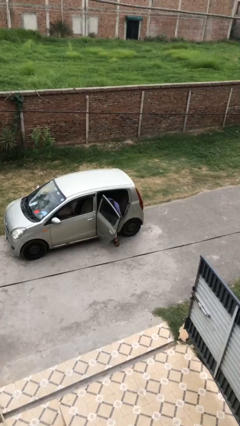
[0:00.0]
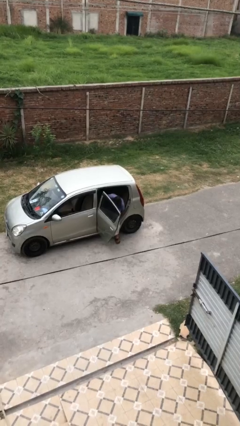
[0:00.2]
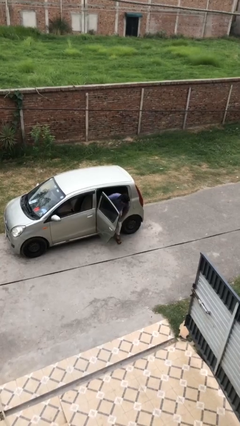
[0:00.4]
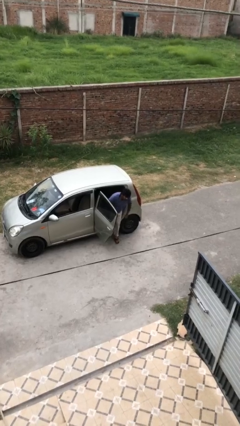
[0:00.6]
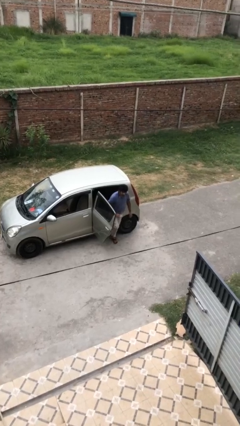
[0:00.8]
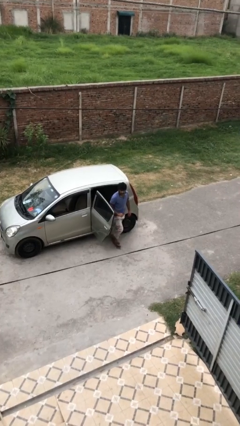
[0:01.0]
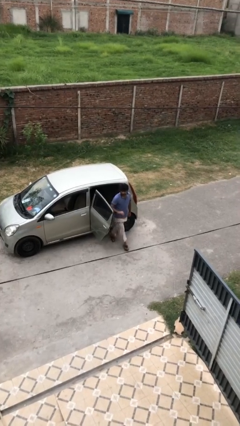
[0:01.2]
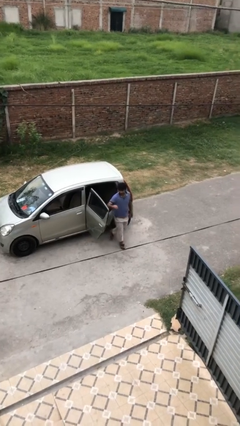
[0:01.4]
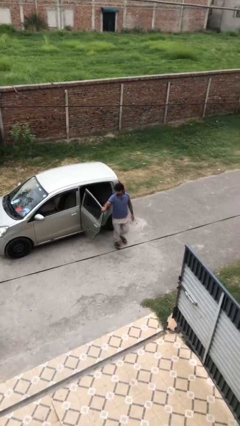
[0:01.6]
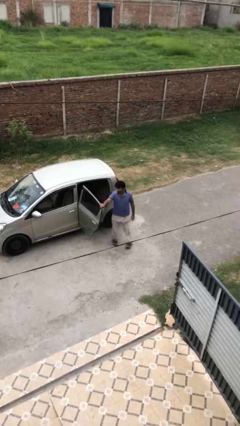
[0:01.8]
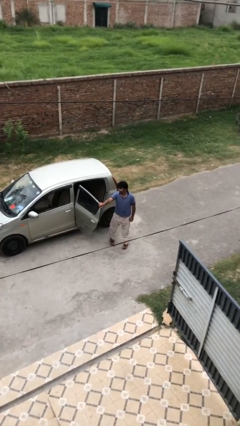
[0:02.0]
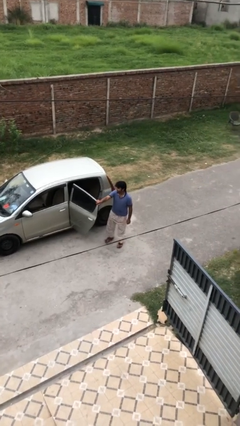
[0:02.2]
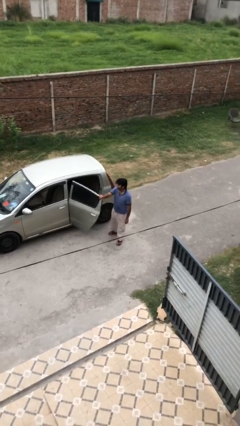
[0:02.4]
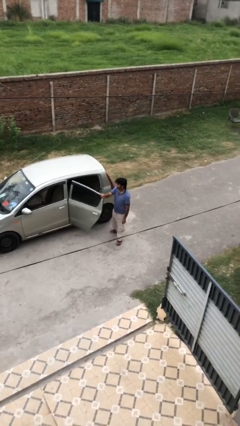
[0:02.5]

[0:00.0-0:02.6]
person exits car

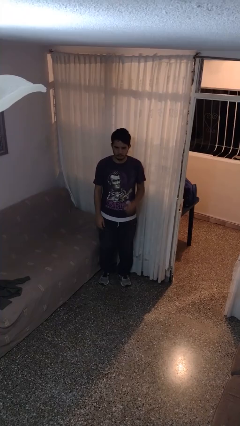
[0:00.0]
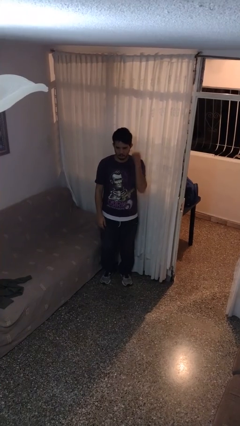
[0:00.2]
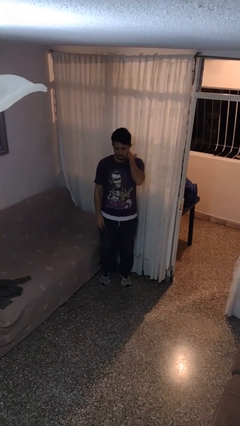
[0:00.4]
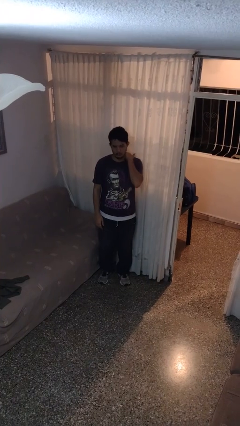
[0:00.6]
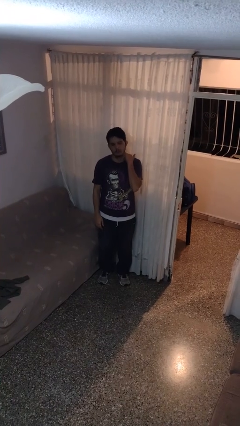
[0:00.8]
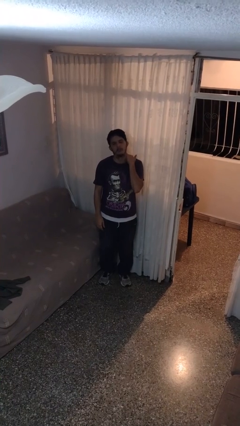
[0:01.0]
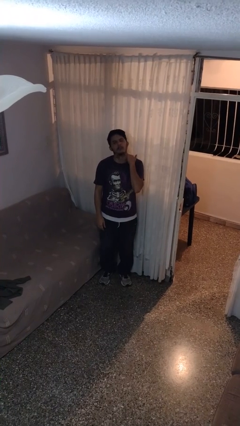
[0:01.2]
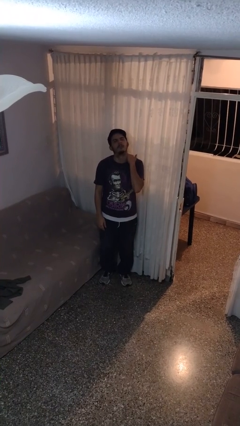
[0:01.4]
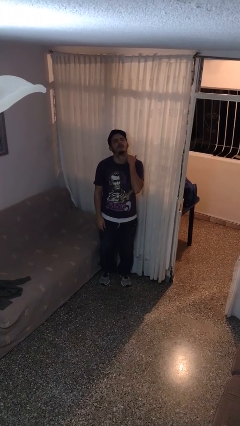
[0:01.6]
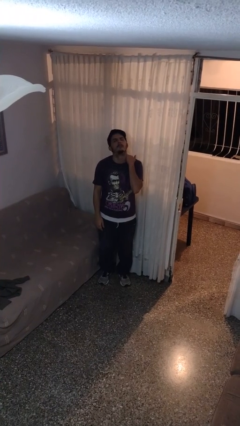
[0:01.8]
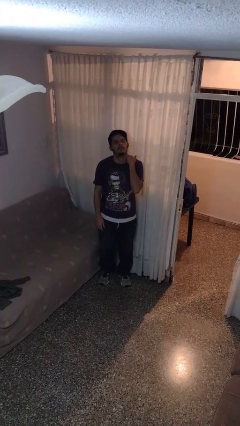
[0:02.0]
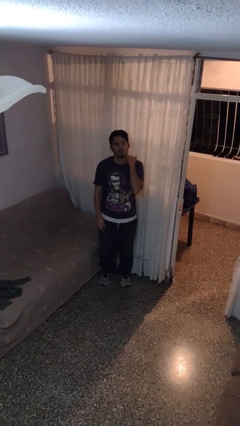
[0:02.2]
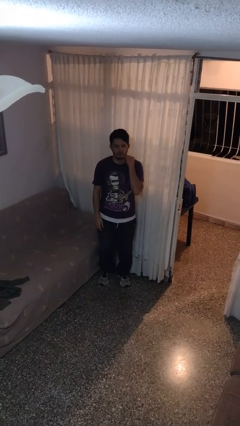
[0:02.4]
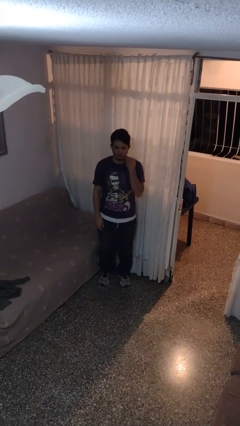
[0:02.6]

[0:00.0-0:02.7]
person rubs neck

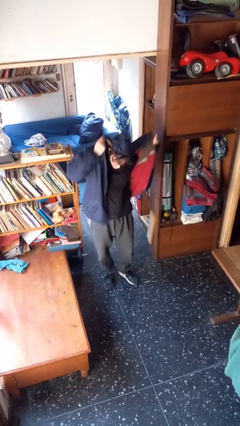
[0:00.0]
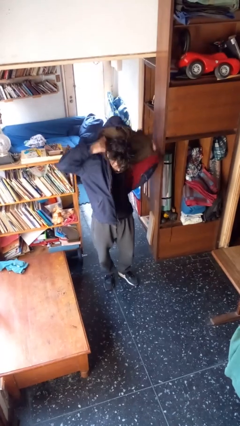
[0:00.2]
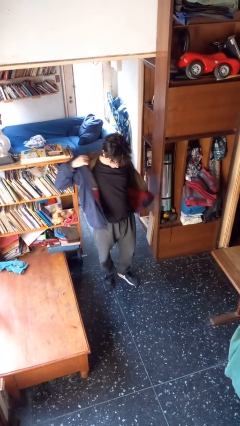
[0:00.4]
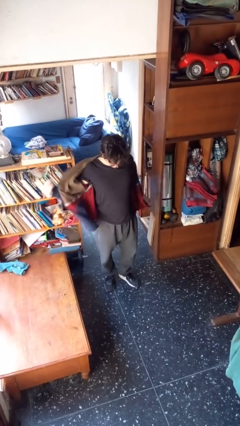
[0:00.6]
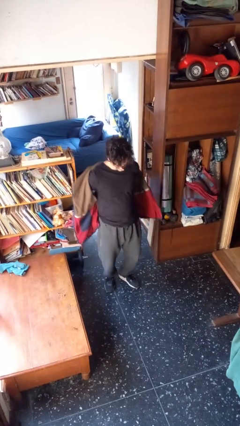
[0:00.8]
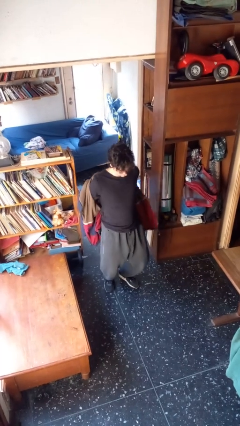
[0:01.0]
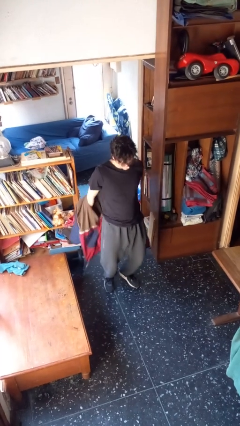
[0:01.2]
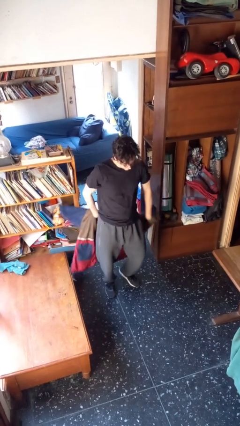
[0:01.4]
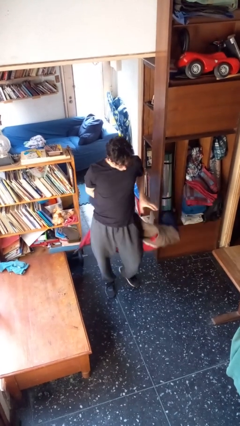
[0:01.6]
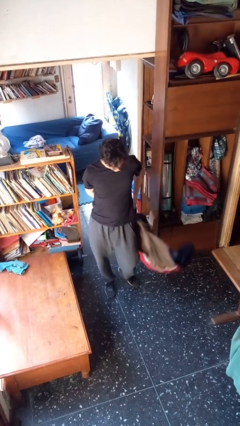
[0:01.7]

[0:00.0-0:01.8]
person takes off hoodie

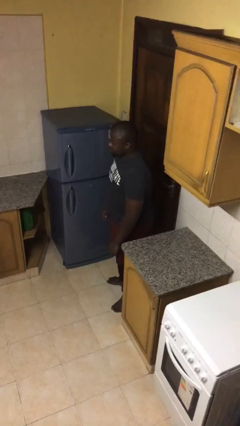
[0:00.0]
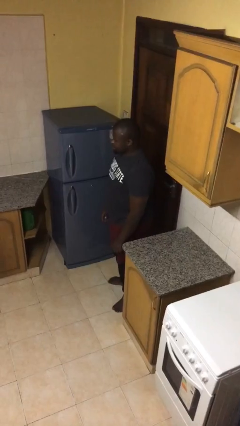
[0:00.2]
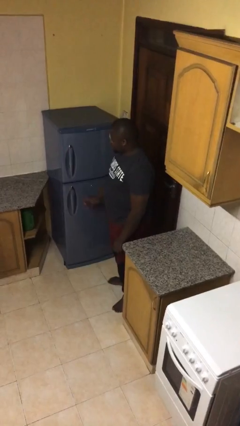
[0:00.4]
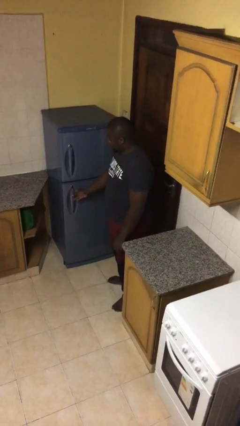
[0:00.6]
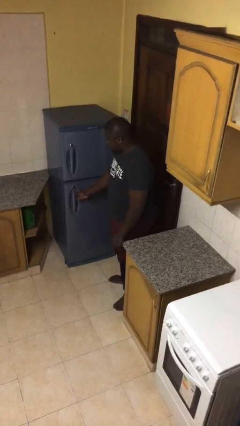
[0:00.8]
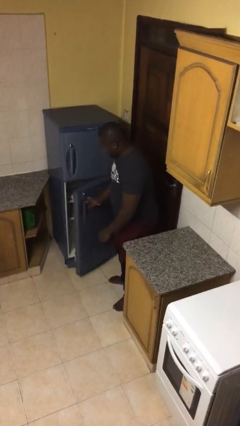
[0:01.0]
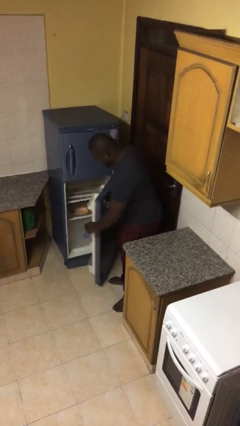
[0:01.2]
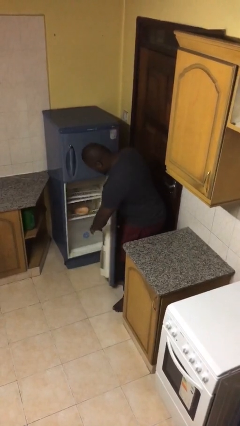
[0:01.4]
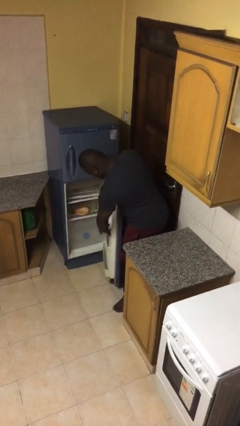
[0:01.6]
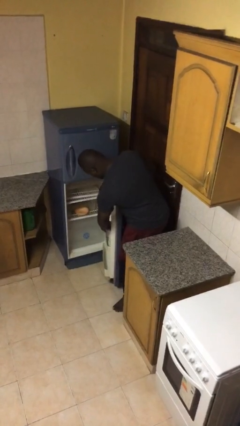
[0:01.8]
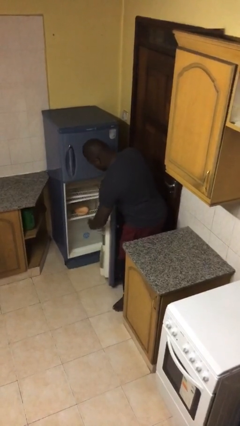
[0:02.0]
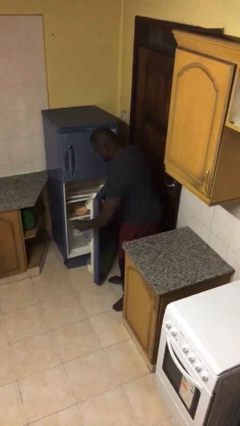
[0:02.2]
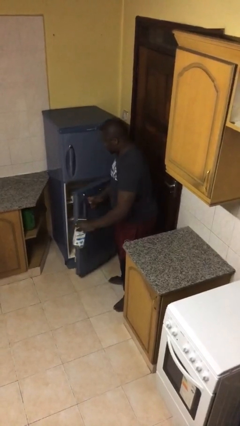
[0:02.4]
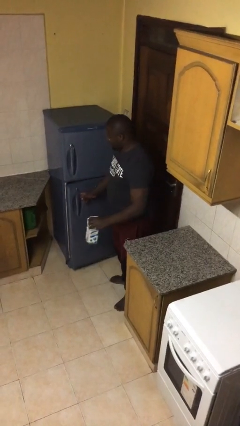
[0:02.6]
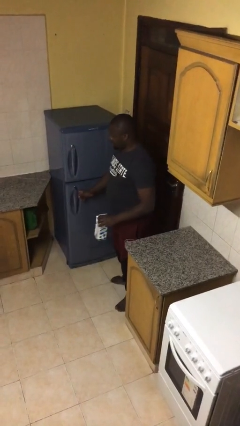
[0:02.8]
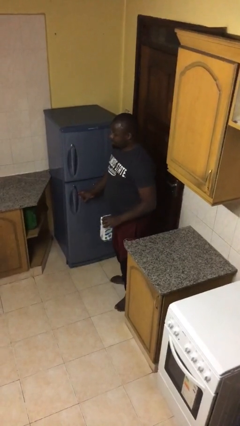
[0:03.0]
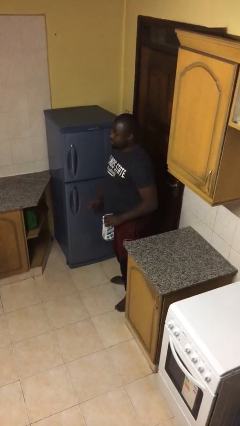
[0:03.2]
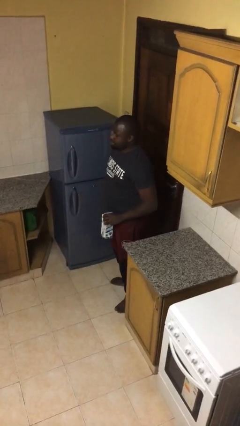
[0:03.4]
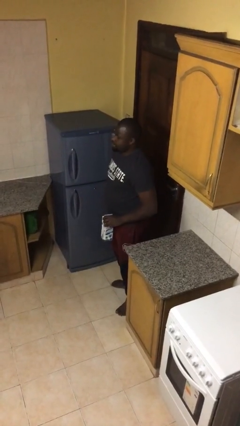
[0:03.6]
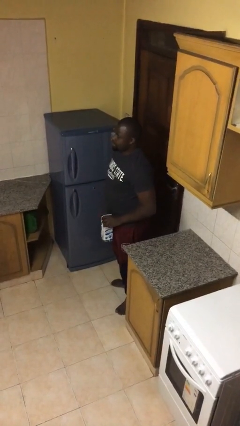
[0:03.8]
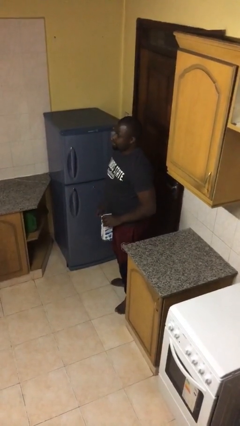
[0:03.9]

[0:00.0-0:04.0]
person takes object from refrigerator

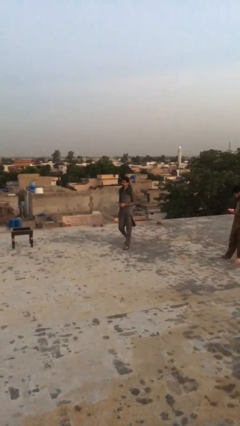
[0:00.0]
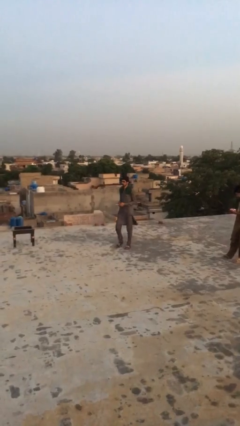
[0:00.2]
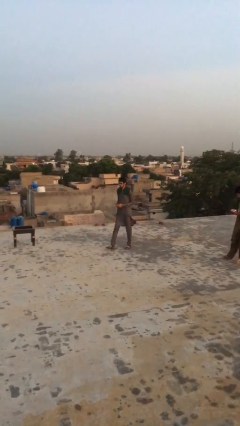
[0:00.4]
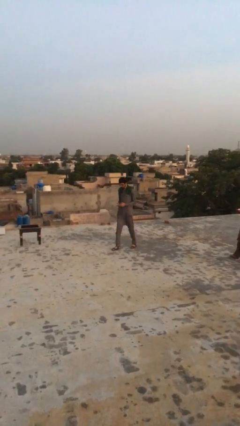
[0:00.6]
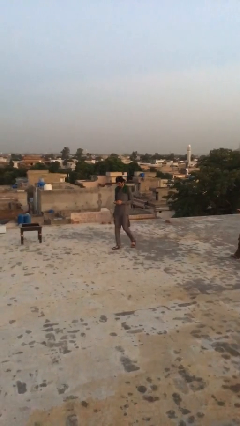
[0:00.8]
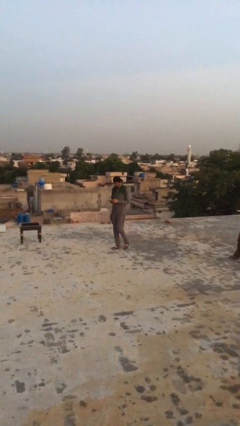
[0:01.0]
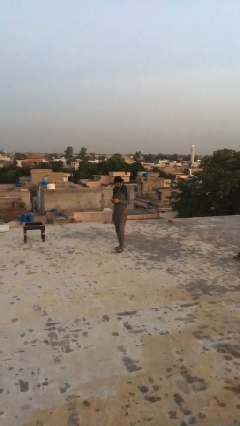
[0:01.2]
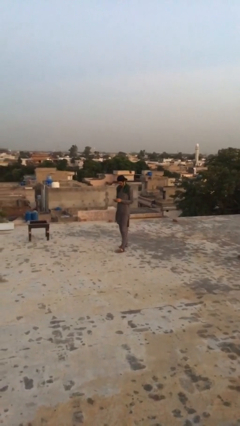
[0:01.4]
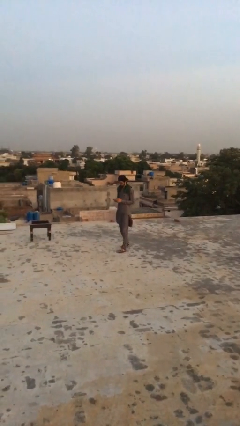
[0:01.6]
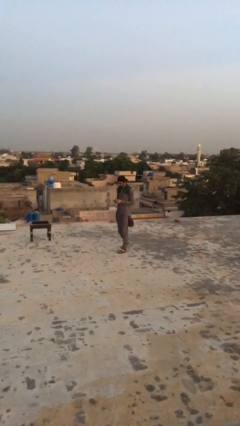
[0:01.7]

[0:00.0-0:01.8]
person texts on phone

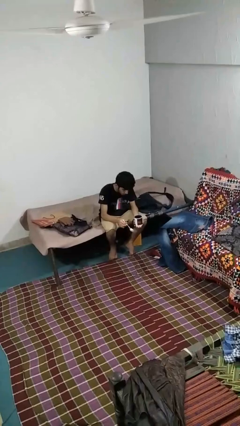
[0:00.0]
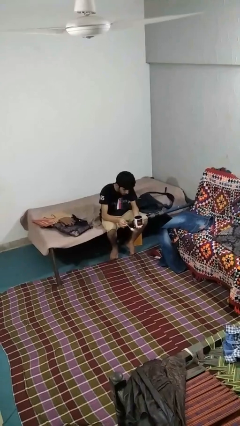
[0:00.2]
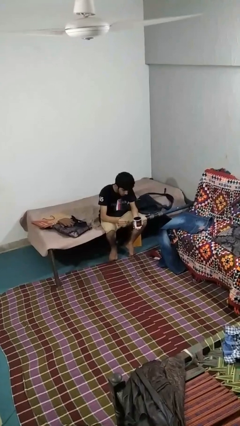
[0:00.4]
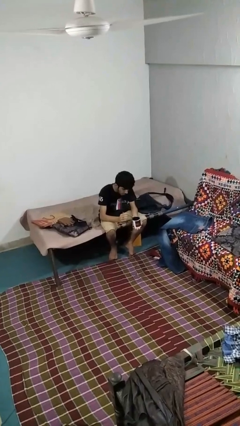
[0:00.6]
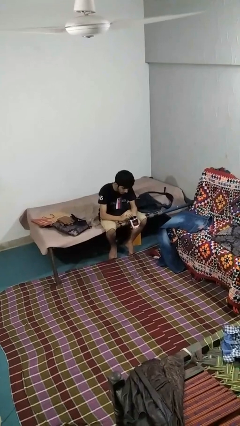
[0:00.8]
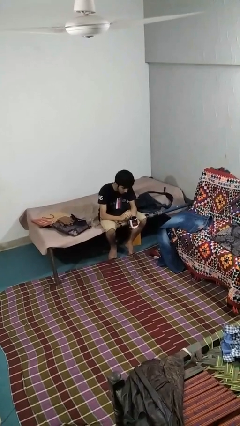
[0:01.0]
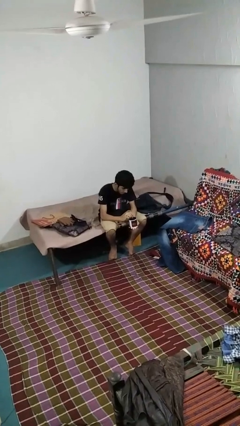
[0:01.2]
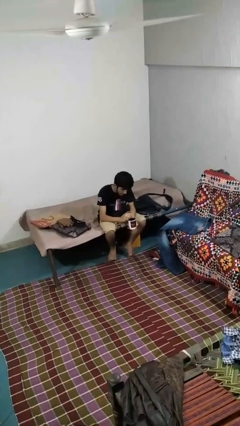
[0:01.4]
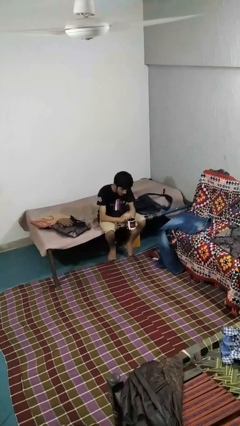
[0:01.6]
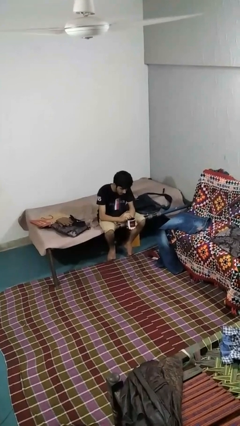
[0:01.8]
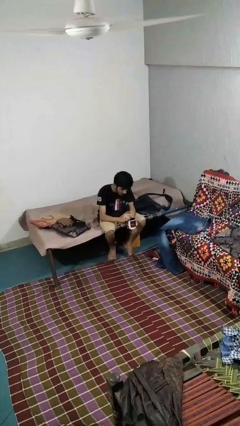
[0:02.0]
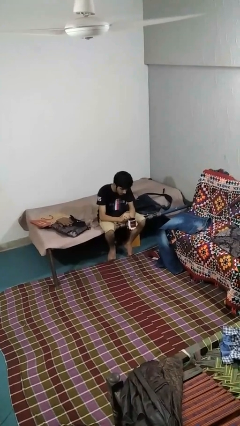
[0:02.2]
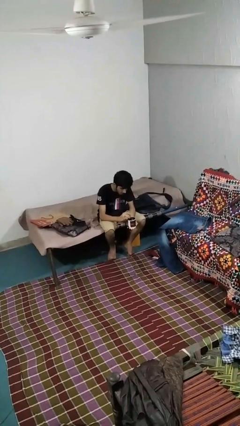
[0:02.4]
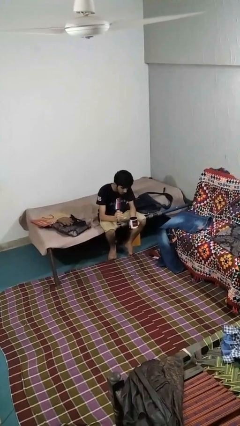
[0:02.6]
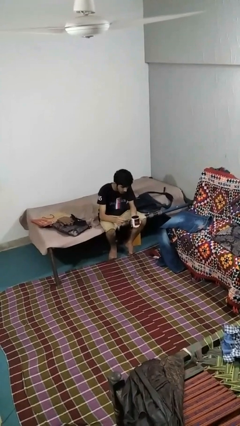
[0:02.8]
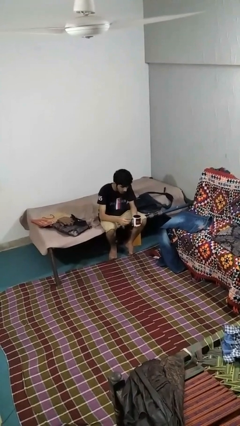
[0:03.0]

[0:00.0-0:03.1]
person stirs mug

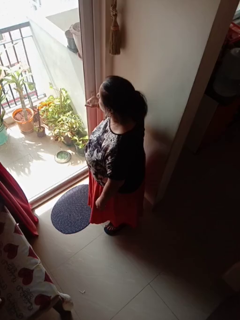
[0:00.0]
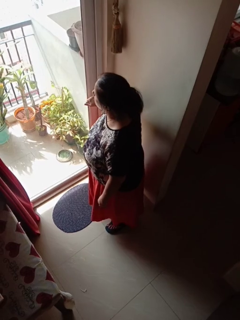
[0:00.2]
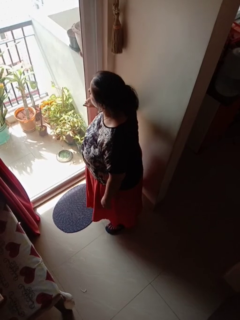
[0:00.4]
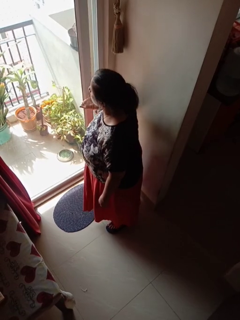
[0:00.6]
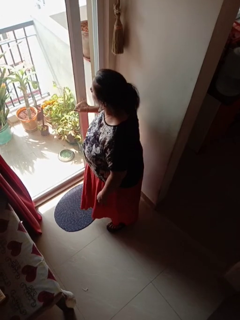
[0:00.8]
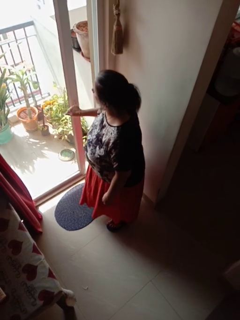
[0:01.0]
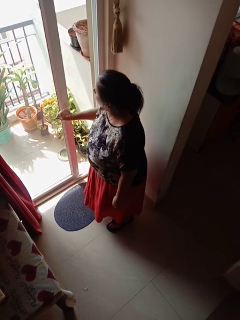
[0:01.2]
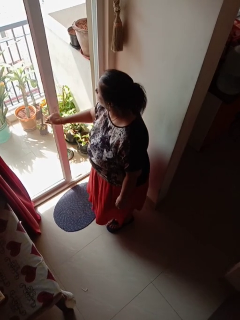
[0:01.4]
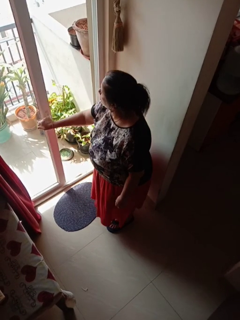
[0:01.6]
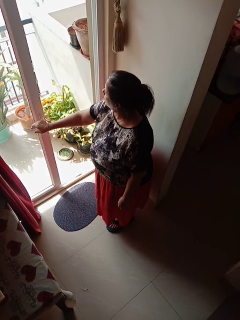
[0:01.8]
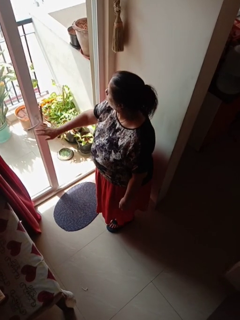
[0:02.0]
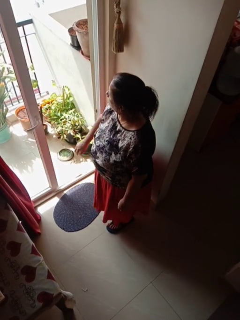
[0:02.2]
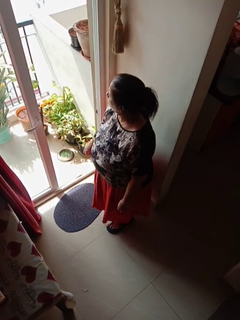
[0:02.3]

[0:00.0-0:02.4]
person opens sliding door
